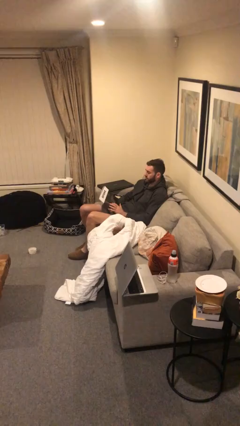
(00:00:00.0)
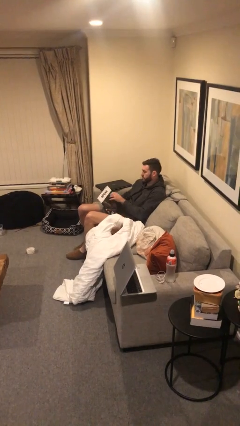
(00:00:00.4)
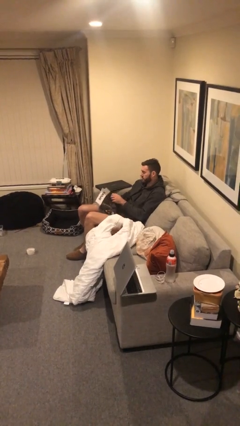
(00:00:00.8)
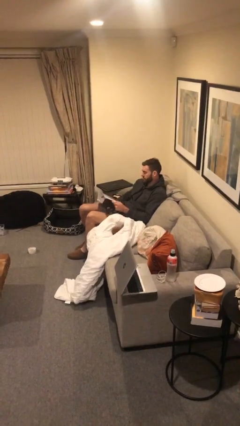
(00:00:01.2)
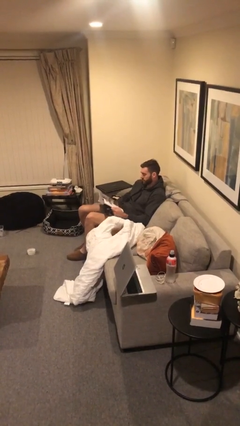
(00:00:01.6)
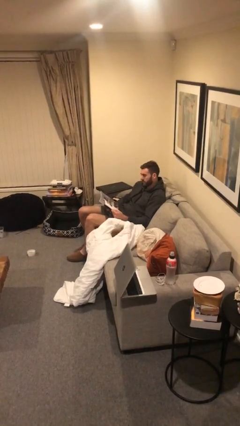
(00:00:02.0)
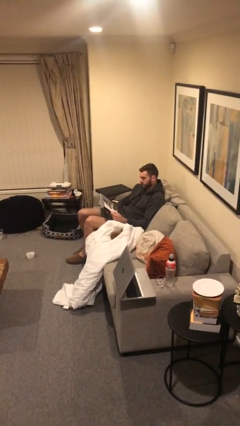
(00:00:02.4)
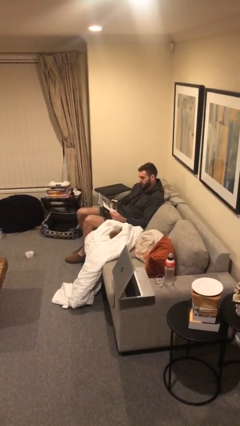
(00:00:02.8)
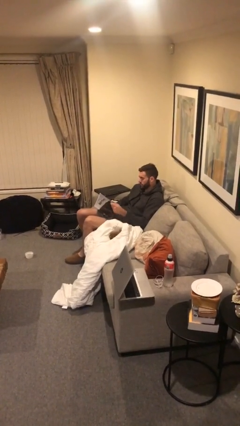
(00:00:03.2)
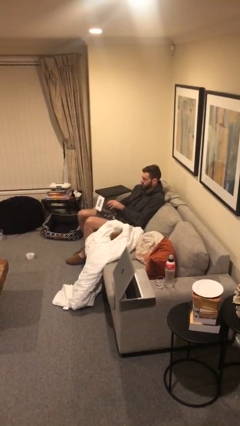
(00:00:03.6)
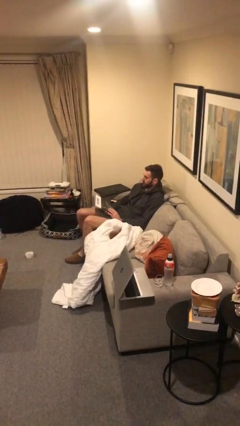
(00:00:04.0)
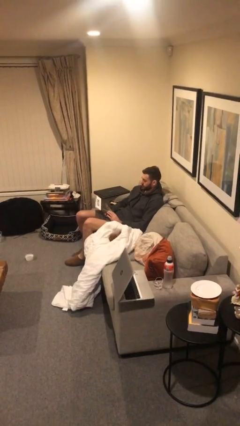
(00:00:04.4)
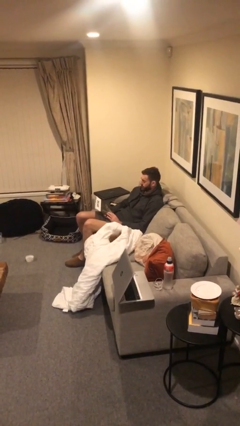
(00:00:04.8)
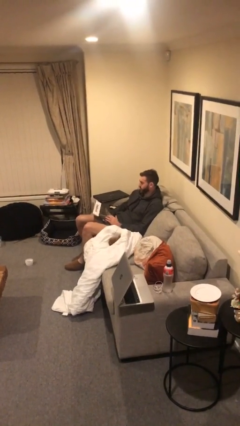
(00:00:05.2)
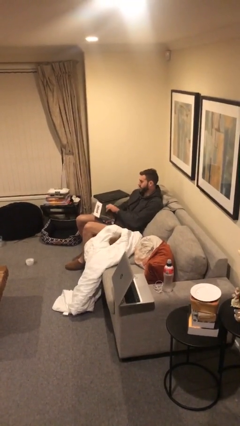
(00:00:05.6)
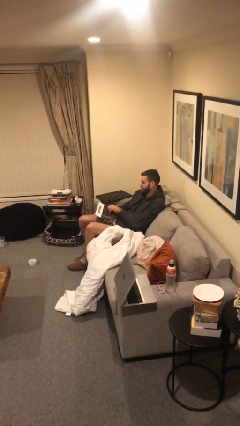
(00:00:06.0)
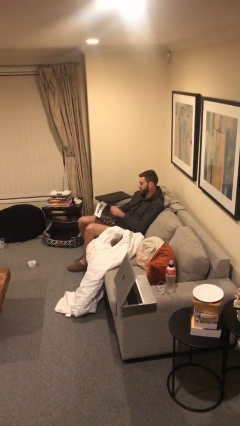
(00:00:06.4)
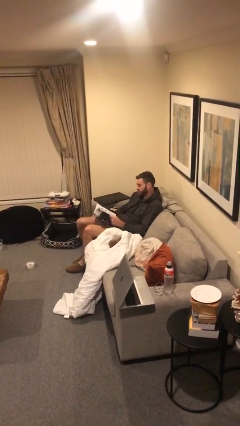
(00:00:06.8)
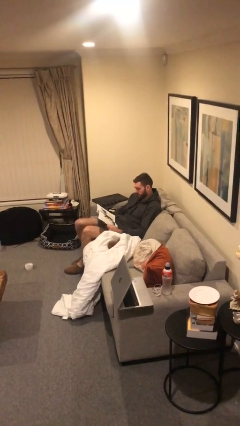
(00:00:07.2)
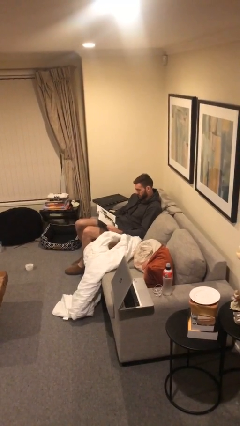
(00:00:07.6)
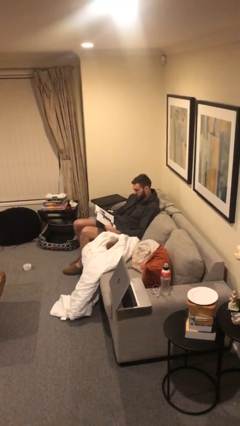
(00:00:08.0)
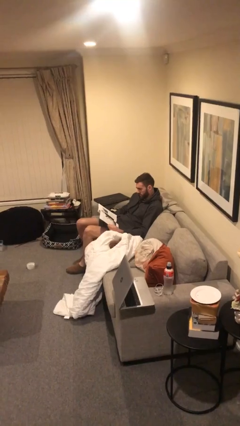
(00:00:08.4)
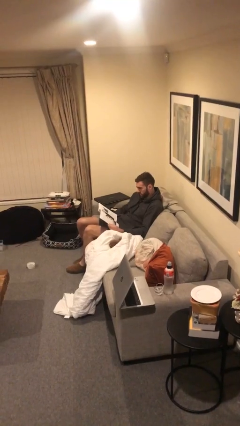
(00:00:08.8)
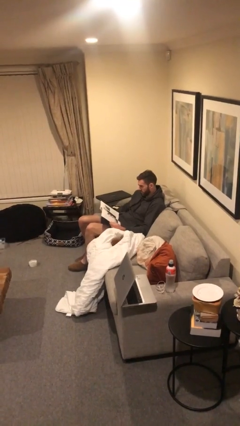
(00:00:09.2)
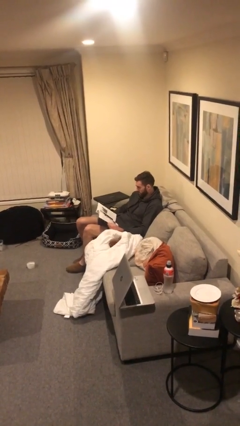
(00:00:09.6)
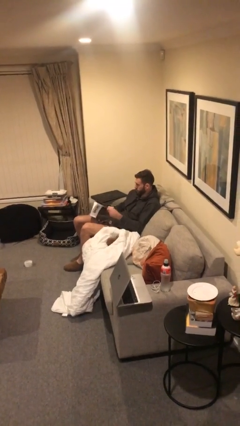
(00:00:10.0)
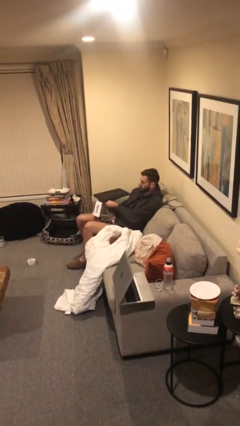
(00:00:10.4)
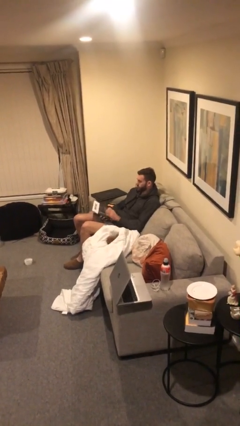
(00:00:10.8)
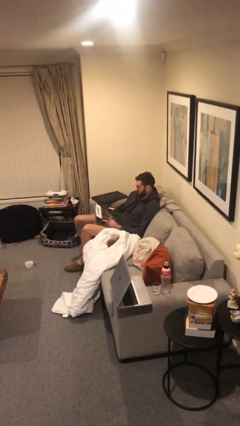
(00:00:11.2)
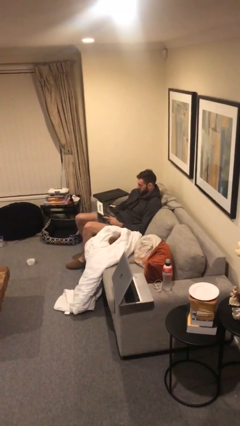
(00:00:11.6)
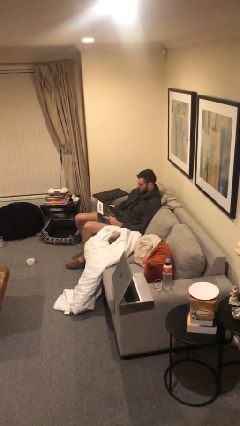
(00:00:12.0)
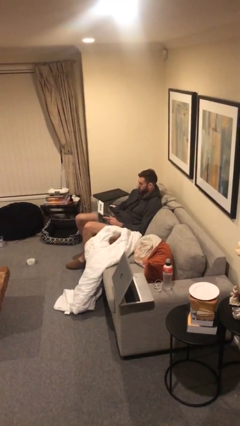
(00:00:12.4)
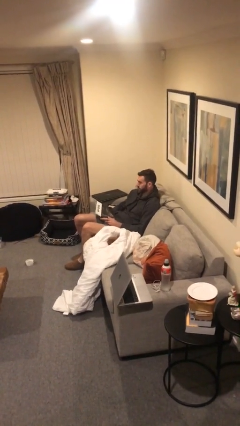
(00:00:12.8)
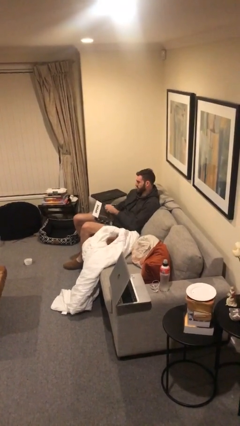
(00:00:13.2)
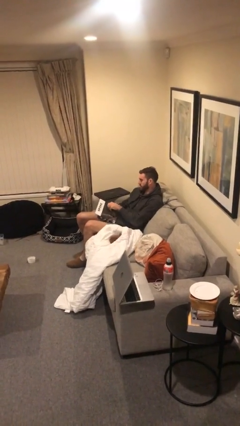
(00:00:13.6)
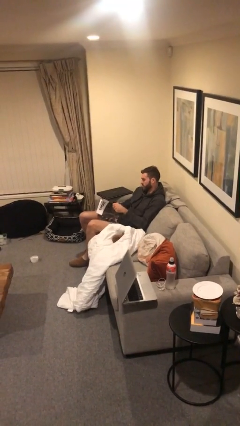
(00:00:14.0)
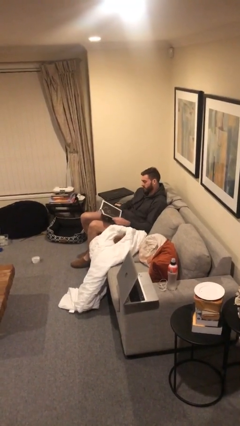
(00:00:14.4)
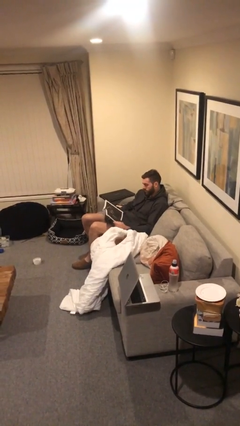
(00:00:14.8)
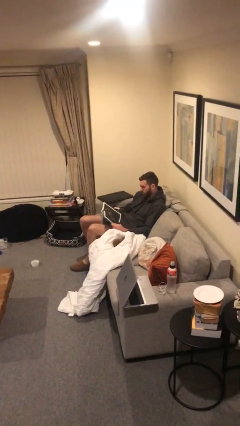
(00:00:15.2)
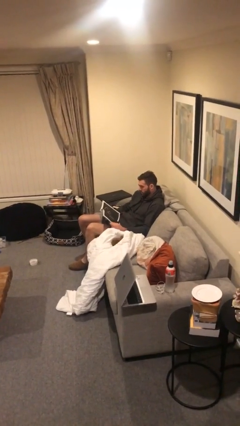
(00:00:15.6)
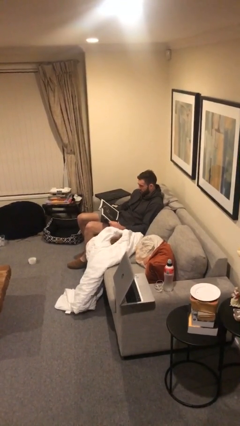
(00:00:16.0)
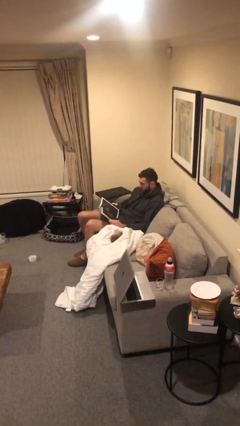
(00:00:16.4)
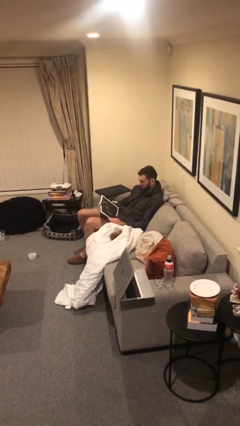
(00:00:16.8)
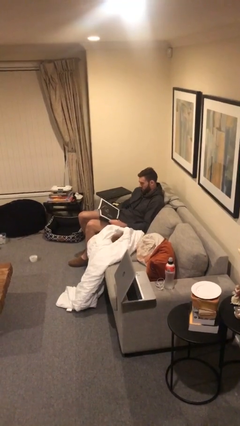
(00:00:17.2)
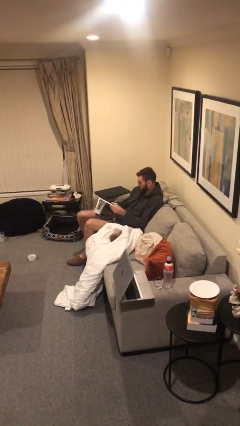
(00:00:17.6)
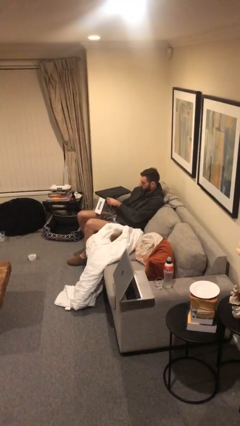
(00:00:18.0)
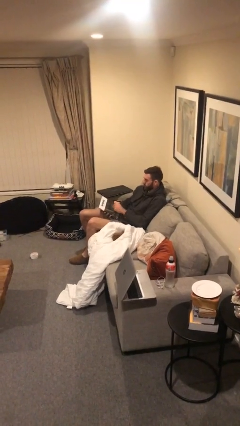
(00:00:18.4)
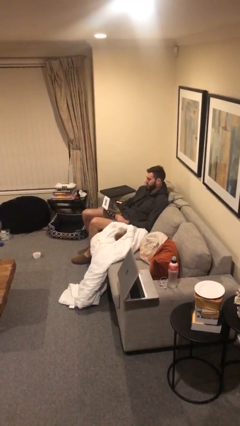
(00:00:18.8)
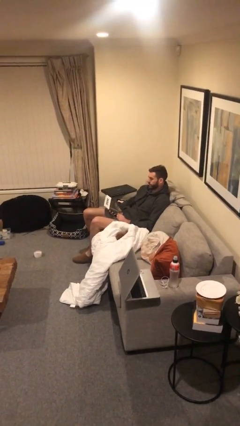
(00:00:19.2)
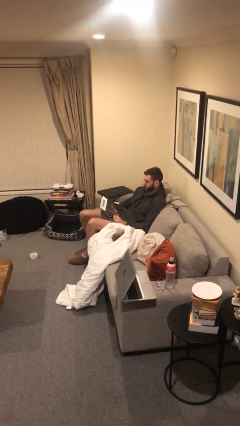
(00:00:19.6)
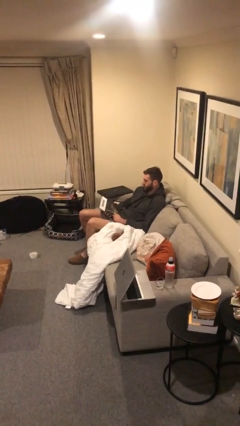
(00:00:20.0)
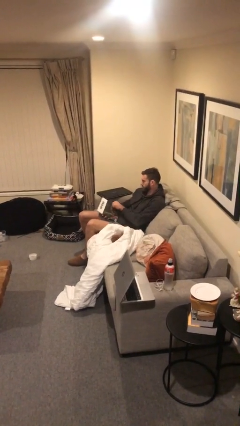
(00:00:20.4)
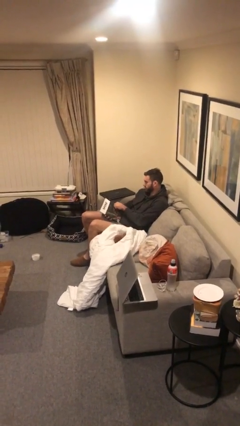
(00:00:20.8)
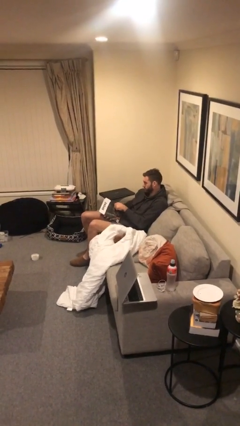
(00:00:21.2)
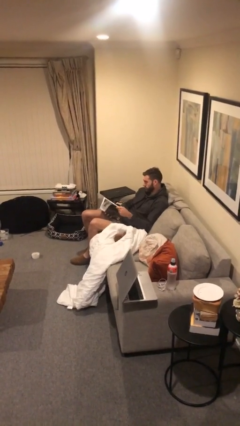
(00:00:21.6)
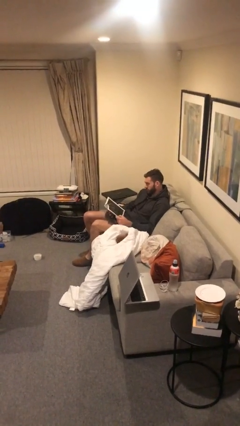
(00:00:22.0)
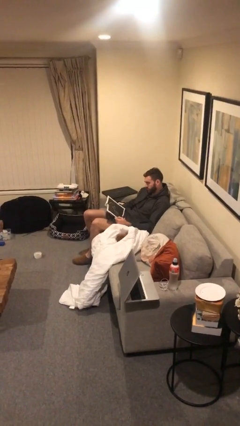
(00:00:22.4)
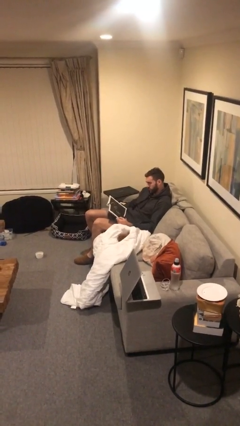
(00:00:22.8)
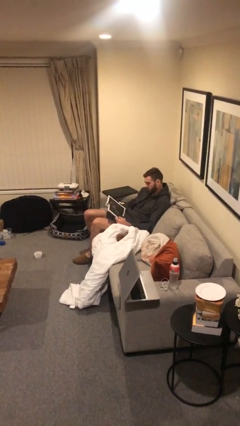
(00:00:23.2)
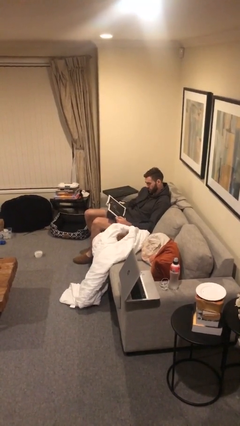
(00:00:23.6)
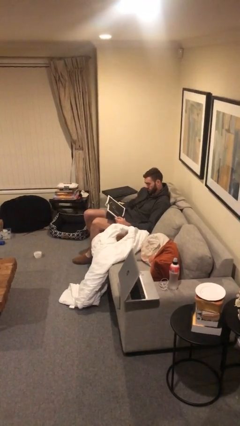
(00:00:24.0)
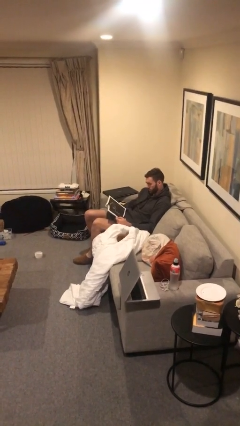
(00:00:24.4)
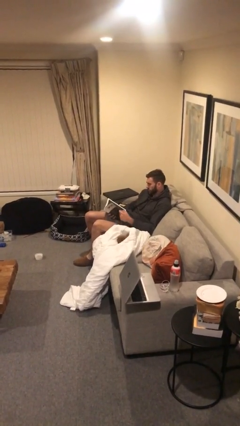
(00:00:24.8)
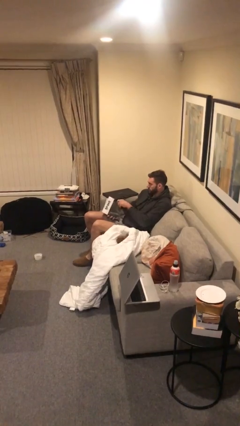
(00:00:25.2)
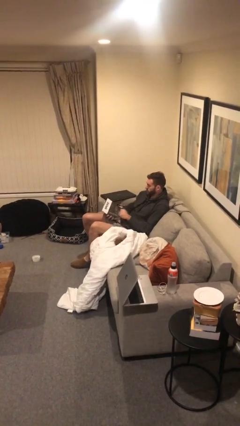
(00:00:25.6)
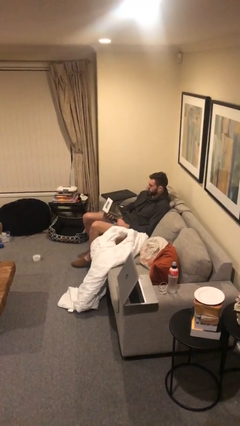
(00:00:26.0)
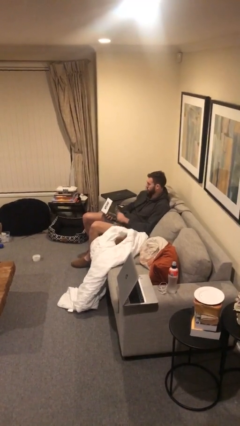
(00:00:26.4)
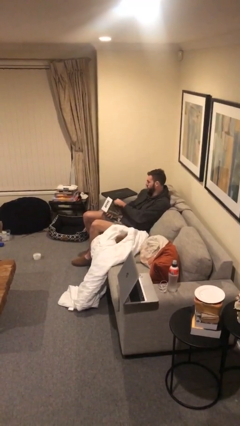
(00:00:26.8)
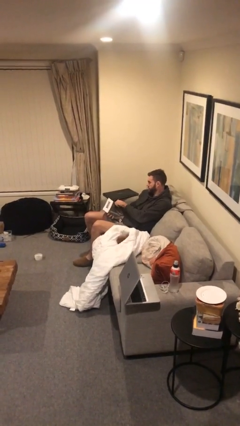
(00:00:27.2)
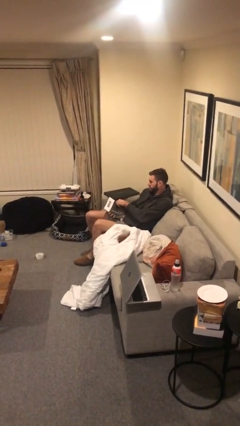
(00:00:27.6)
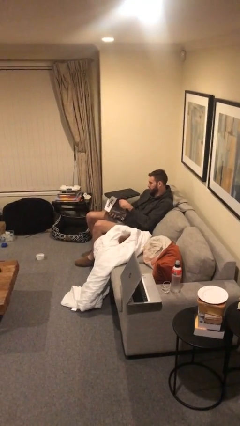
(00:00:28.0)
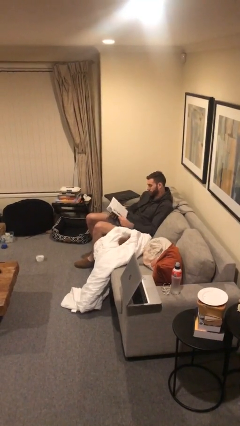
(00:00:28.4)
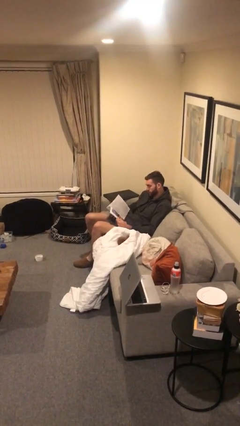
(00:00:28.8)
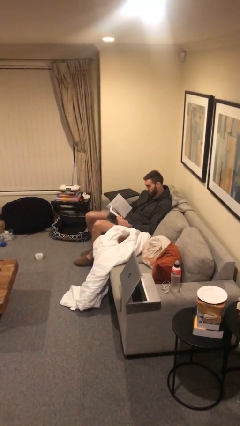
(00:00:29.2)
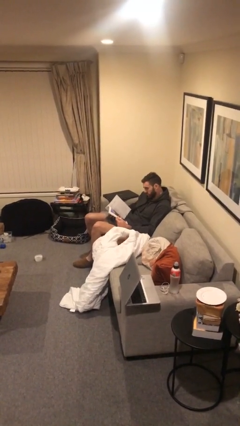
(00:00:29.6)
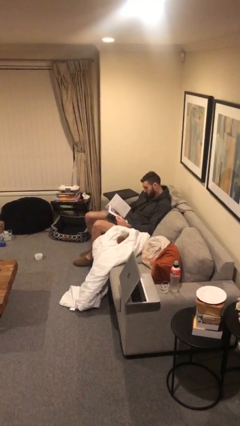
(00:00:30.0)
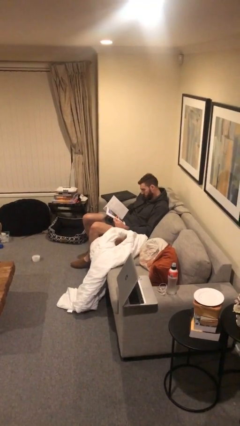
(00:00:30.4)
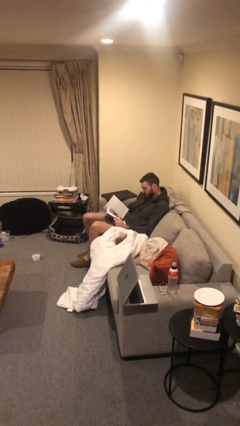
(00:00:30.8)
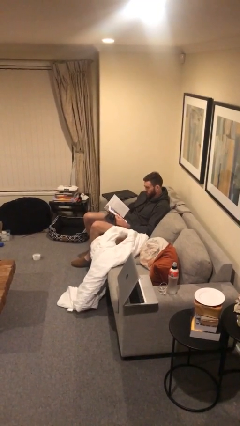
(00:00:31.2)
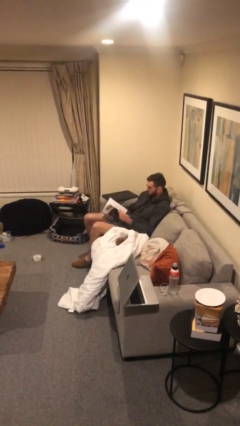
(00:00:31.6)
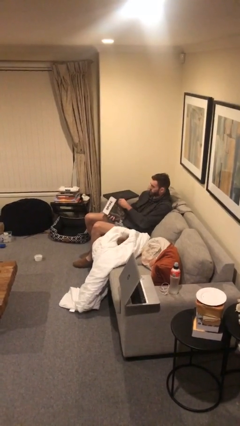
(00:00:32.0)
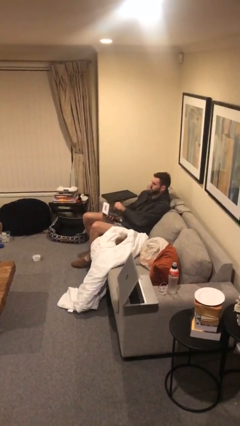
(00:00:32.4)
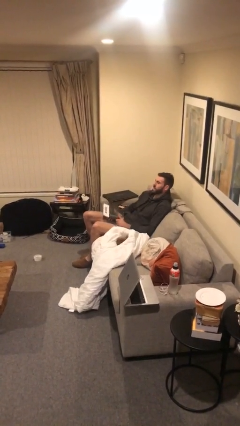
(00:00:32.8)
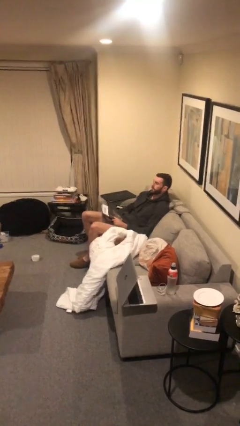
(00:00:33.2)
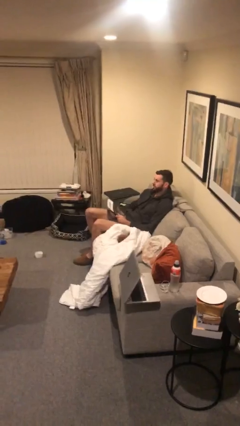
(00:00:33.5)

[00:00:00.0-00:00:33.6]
person reads magazine

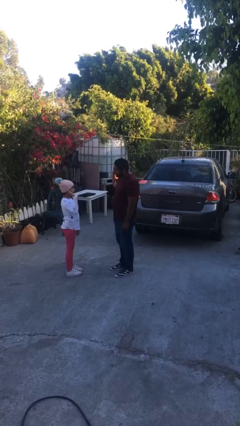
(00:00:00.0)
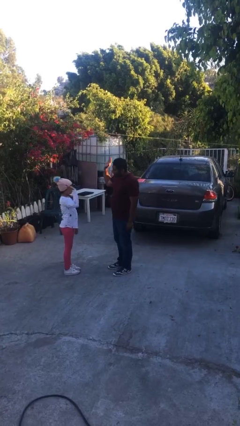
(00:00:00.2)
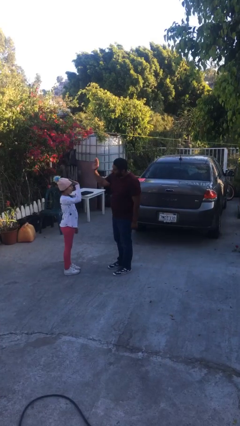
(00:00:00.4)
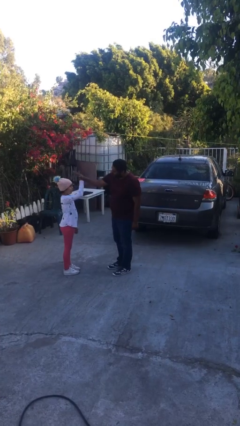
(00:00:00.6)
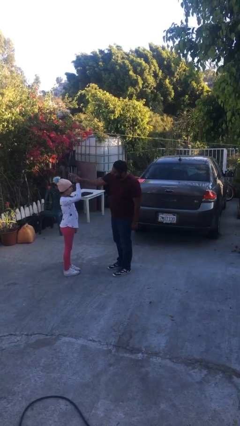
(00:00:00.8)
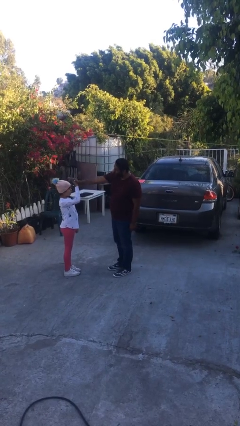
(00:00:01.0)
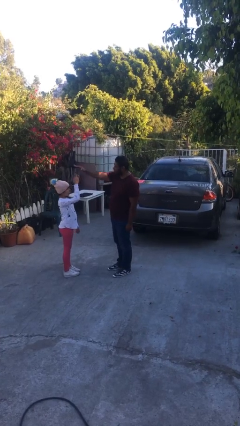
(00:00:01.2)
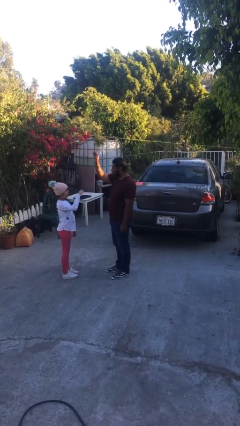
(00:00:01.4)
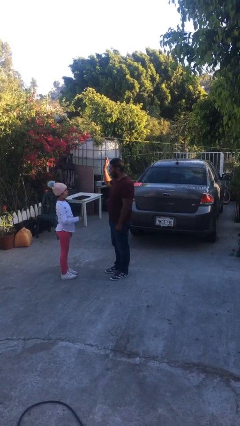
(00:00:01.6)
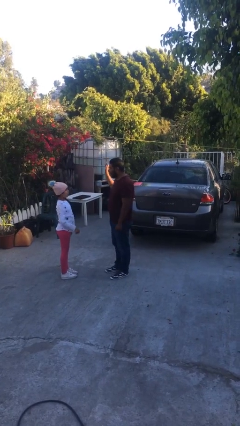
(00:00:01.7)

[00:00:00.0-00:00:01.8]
person highfives hand
